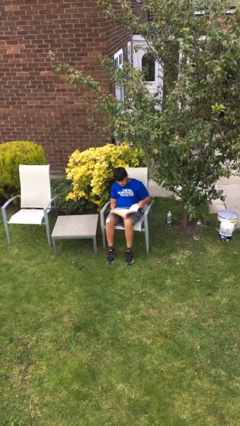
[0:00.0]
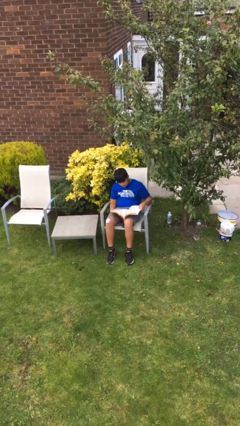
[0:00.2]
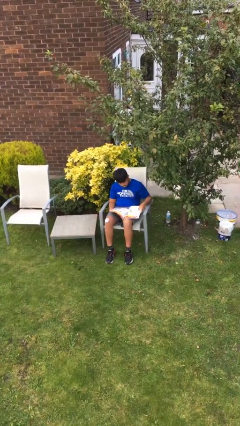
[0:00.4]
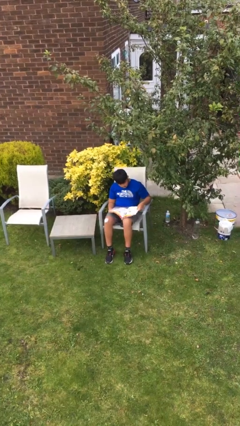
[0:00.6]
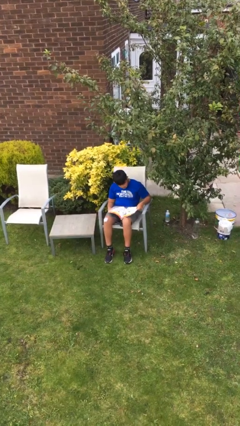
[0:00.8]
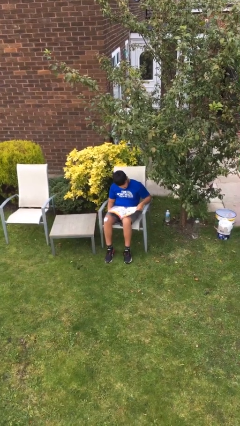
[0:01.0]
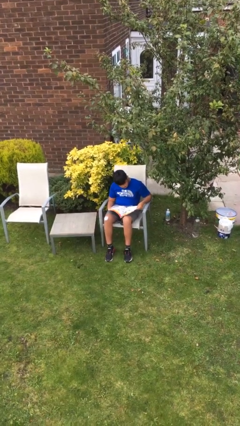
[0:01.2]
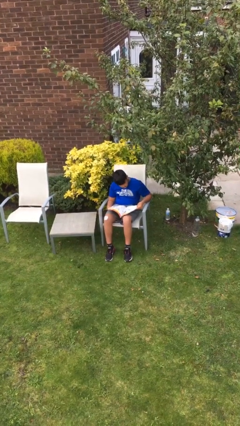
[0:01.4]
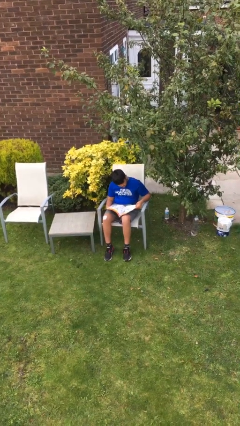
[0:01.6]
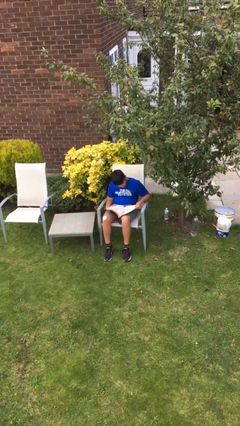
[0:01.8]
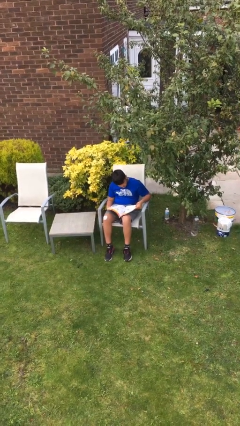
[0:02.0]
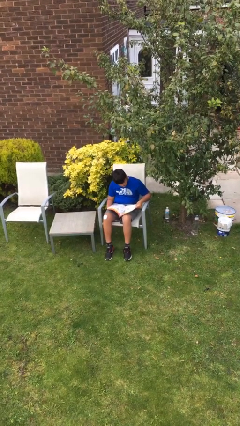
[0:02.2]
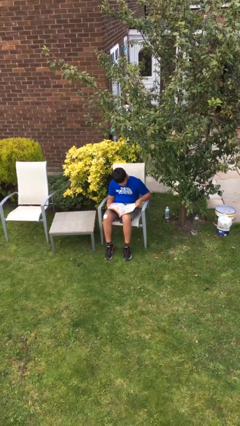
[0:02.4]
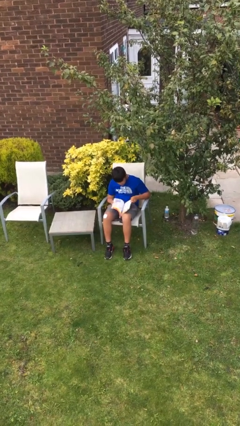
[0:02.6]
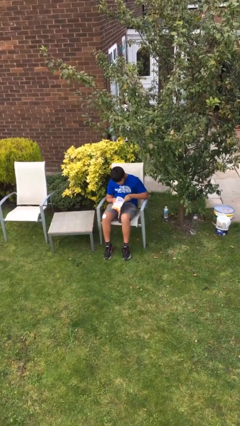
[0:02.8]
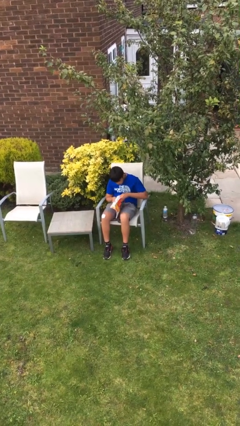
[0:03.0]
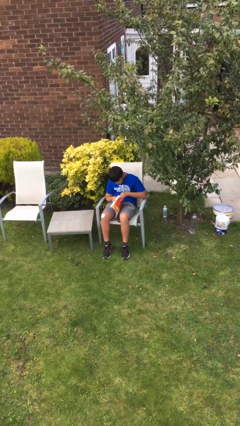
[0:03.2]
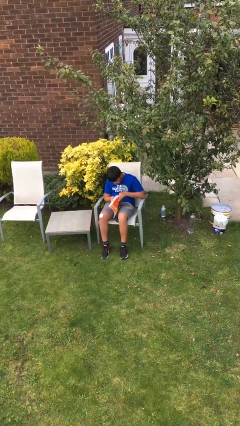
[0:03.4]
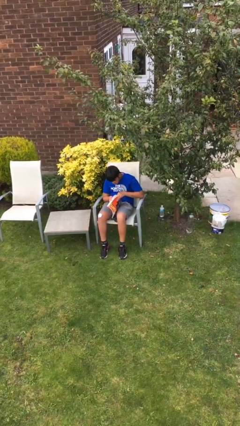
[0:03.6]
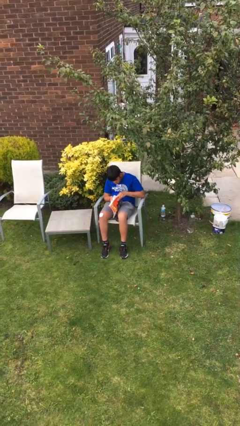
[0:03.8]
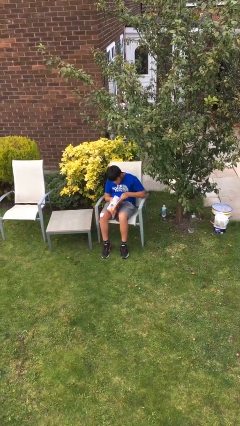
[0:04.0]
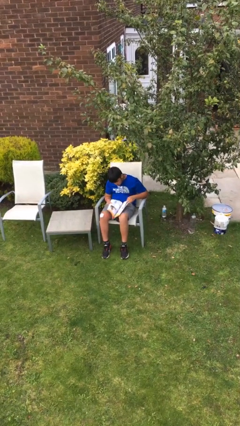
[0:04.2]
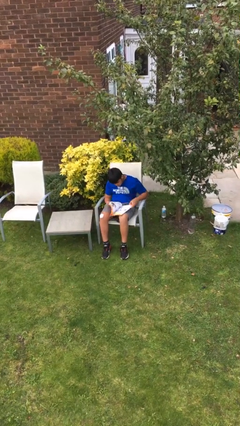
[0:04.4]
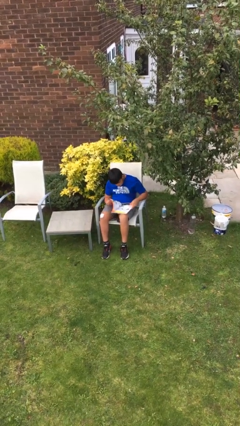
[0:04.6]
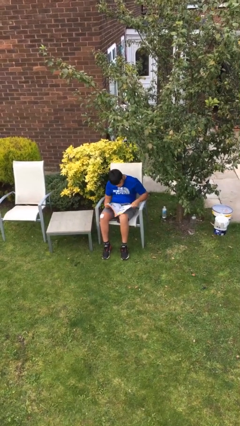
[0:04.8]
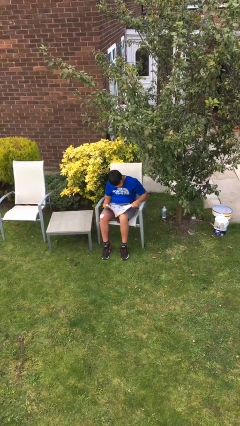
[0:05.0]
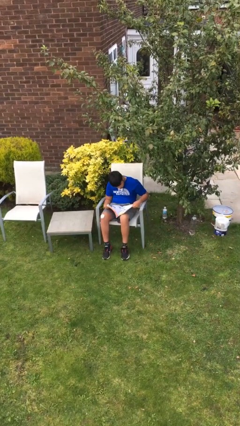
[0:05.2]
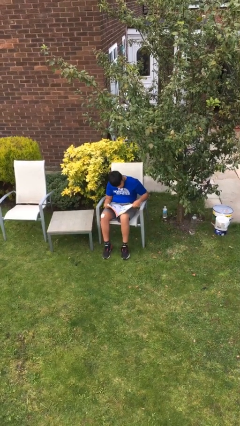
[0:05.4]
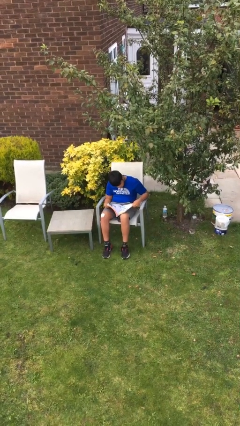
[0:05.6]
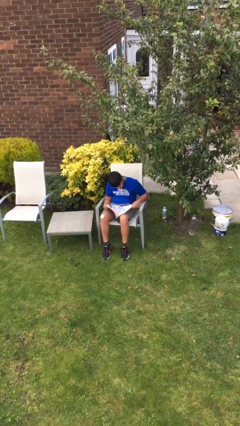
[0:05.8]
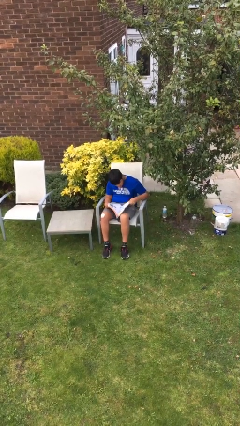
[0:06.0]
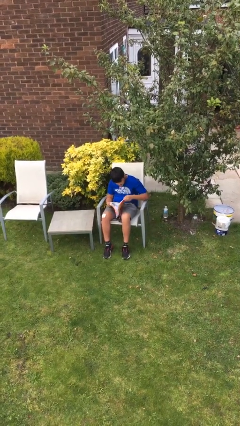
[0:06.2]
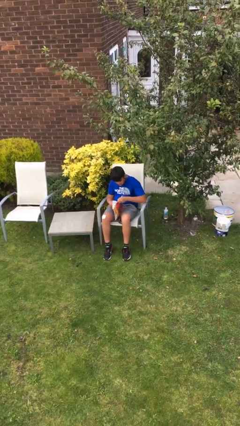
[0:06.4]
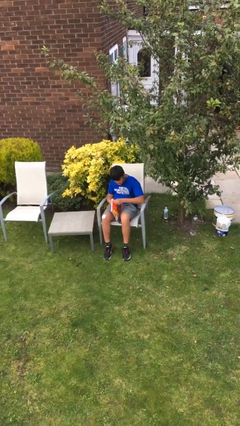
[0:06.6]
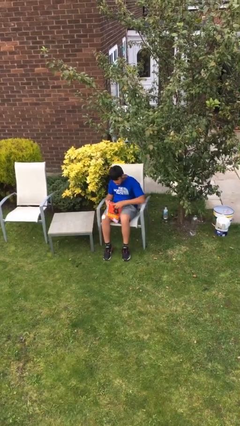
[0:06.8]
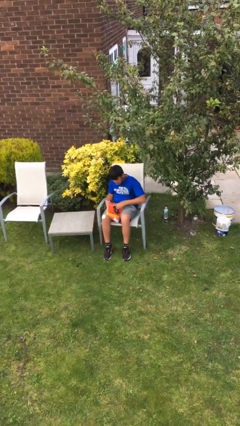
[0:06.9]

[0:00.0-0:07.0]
person reads document

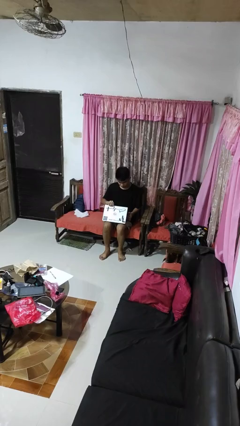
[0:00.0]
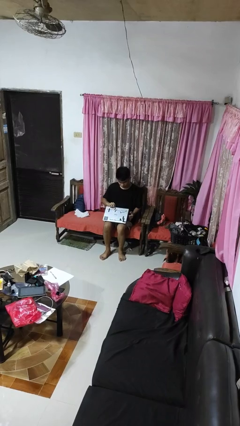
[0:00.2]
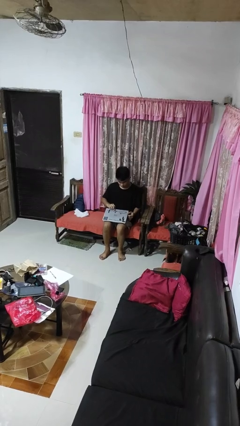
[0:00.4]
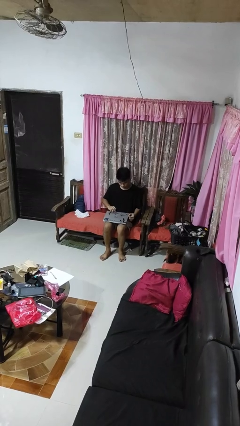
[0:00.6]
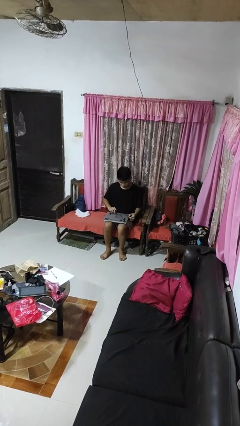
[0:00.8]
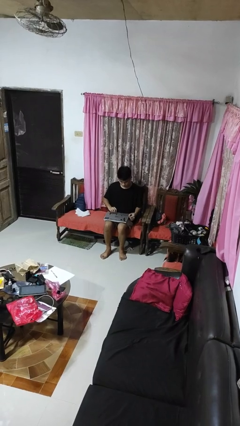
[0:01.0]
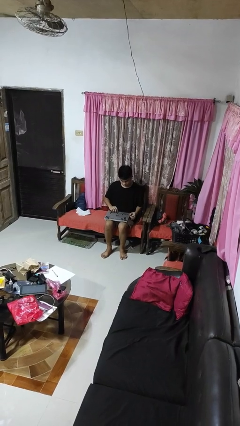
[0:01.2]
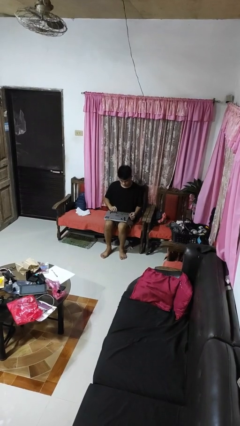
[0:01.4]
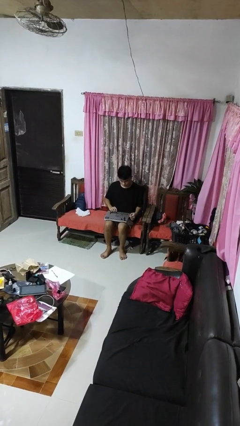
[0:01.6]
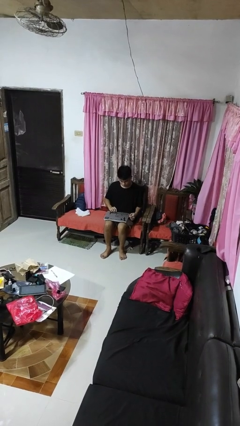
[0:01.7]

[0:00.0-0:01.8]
person closes laptop

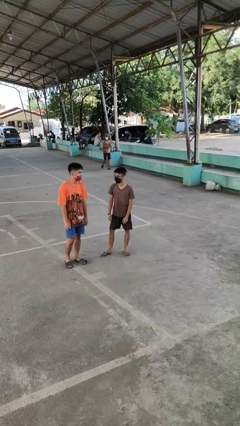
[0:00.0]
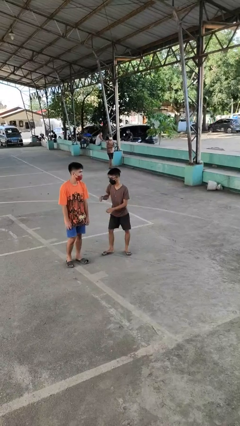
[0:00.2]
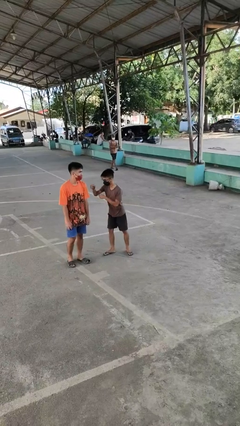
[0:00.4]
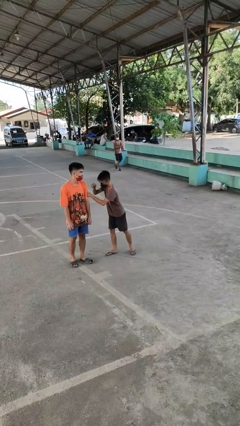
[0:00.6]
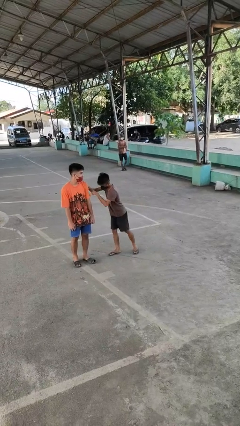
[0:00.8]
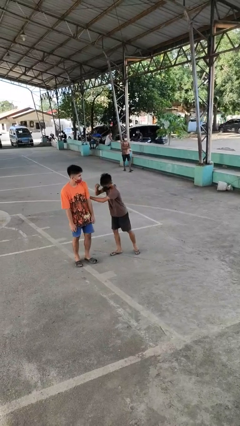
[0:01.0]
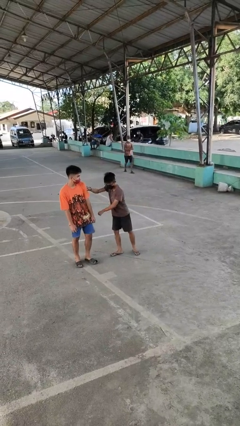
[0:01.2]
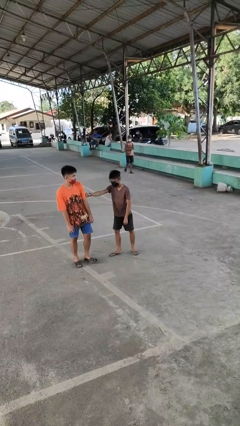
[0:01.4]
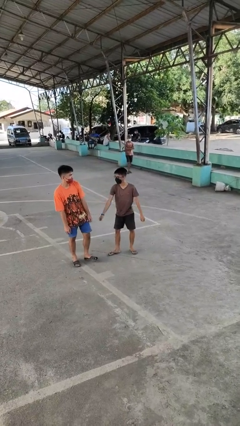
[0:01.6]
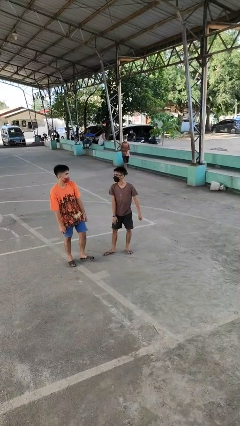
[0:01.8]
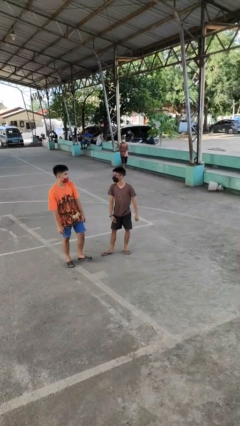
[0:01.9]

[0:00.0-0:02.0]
person pounds shoulders of person

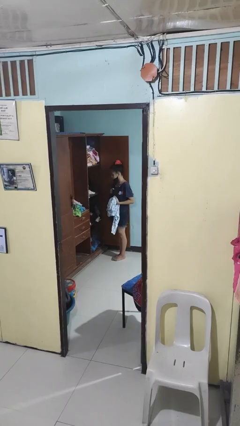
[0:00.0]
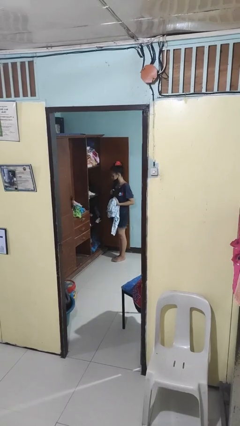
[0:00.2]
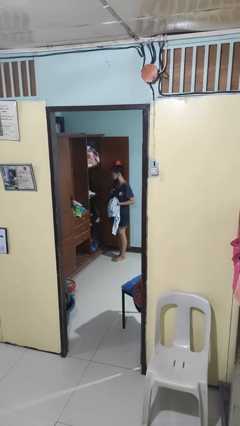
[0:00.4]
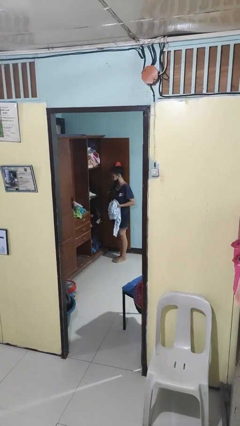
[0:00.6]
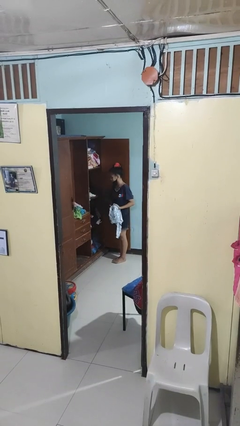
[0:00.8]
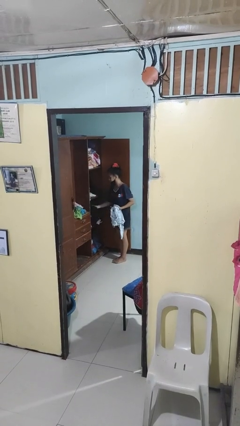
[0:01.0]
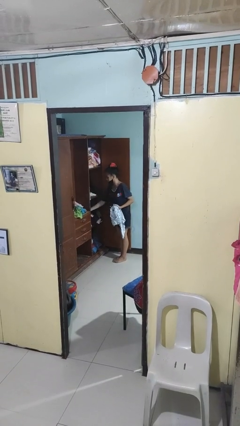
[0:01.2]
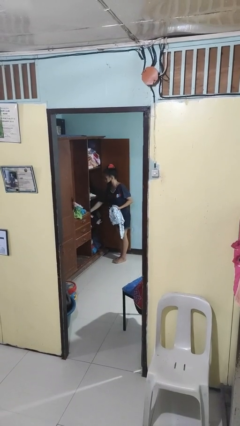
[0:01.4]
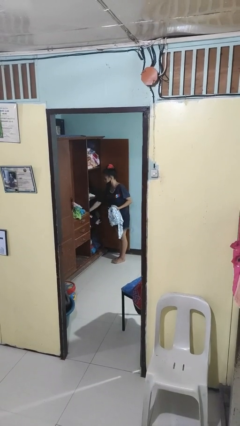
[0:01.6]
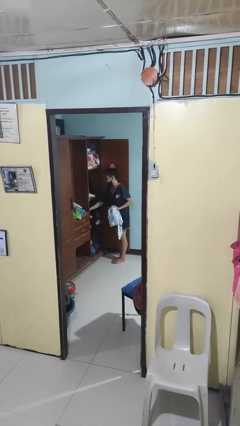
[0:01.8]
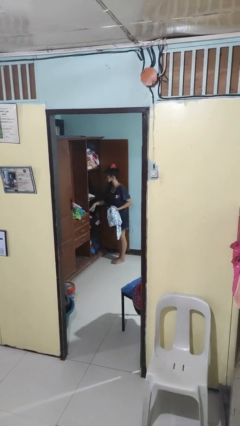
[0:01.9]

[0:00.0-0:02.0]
person puts clothes into dresser

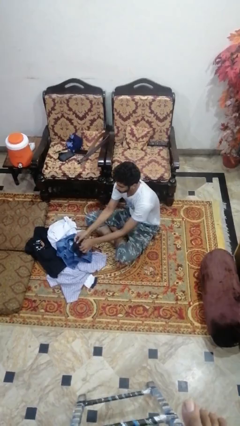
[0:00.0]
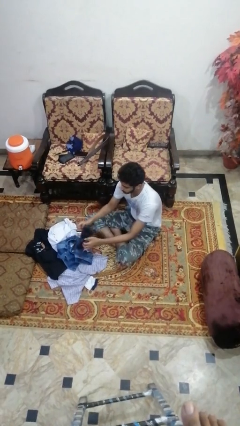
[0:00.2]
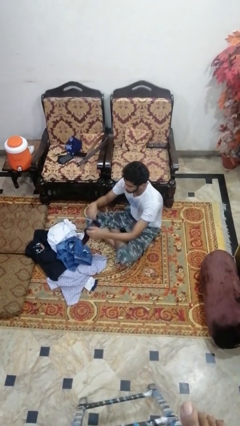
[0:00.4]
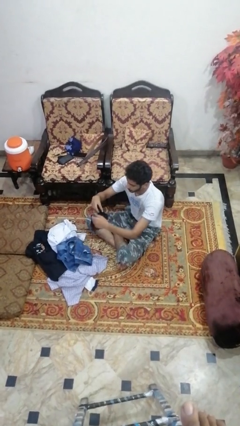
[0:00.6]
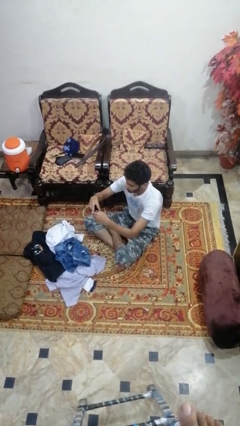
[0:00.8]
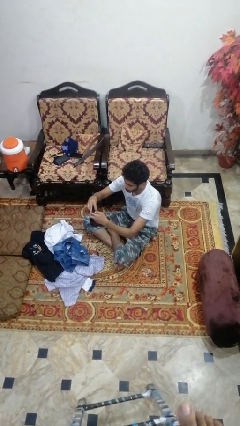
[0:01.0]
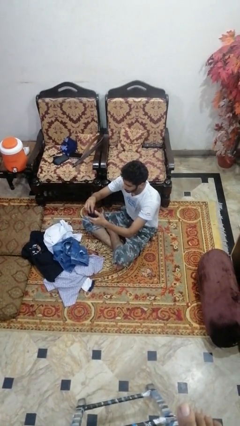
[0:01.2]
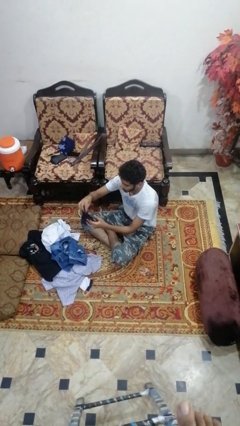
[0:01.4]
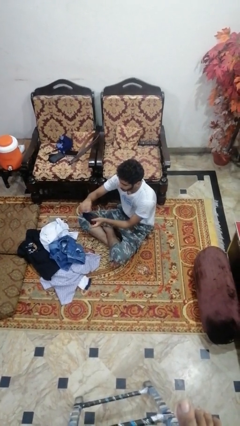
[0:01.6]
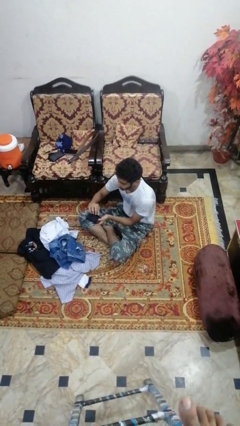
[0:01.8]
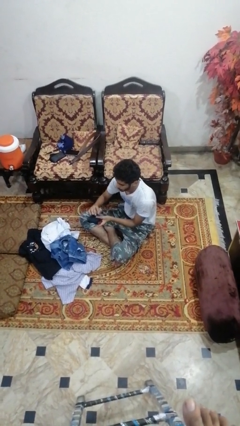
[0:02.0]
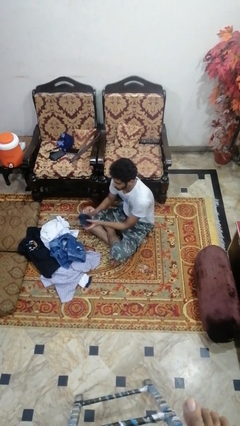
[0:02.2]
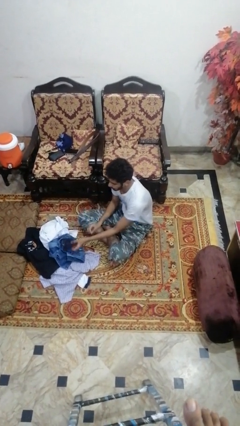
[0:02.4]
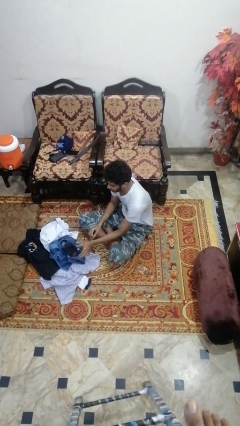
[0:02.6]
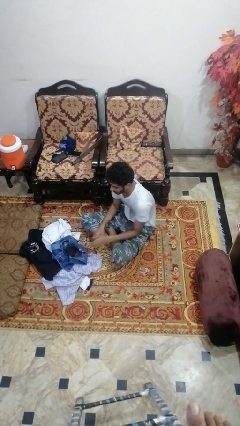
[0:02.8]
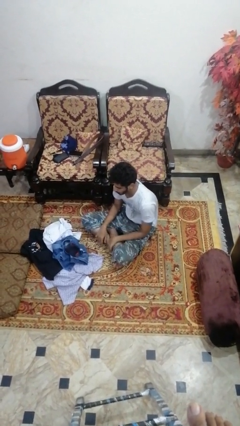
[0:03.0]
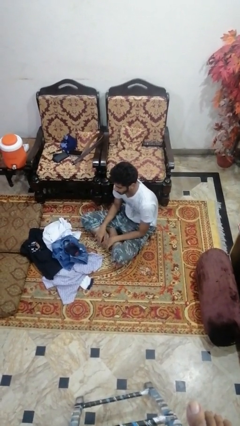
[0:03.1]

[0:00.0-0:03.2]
person folds socks

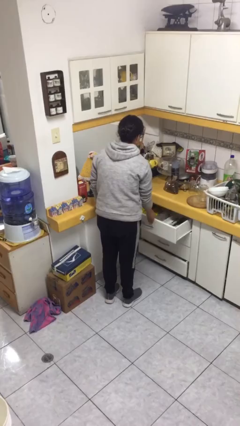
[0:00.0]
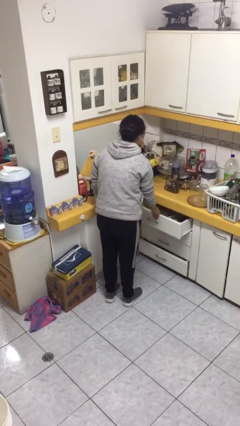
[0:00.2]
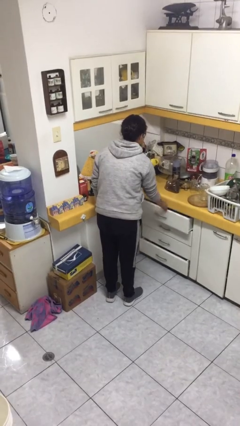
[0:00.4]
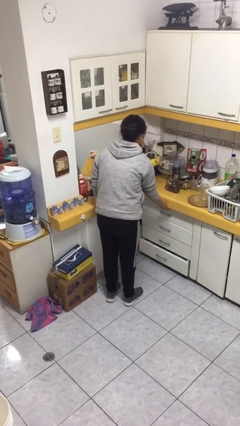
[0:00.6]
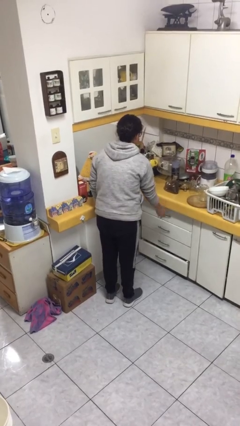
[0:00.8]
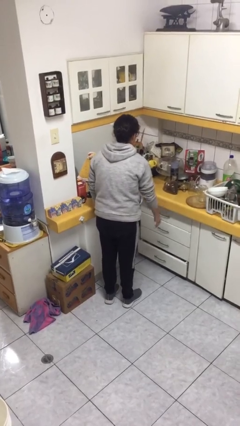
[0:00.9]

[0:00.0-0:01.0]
person closes kitchen drawer

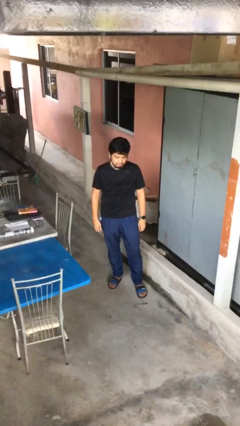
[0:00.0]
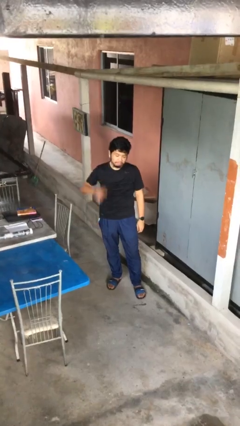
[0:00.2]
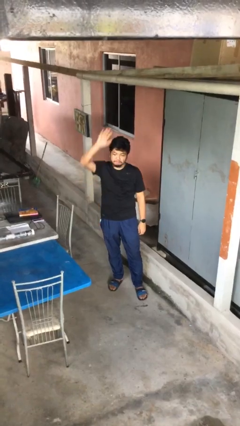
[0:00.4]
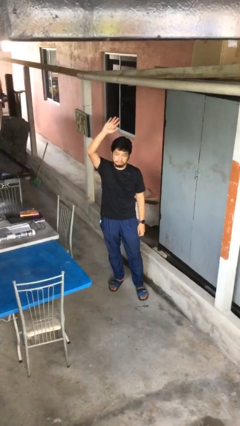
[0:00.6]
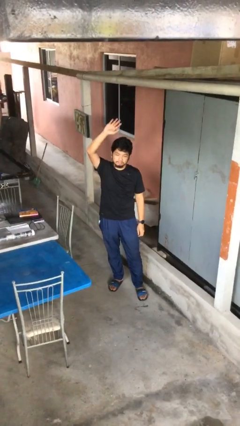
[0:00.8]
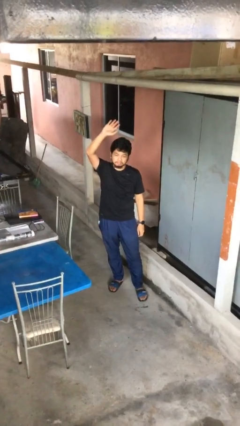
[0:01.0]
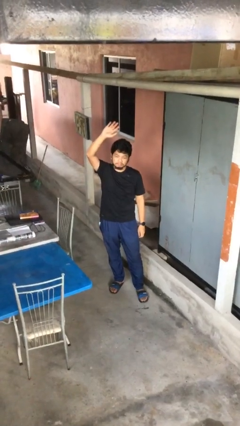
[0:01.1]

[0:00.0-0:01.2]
person gestures raise hand
